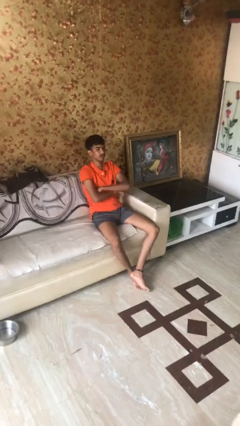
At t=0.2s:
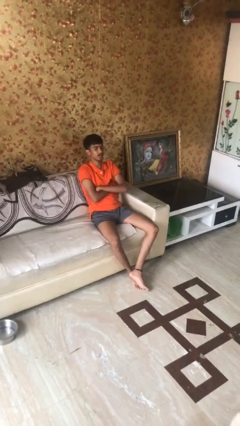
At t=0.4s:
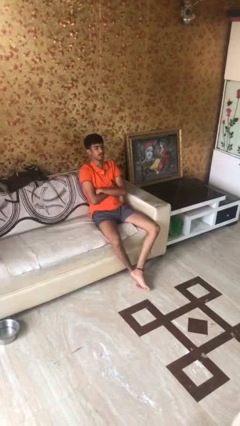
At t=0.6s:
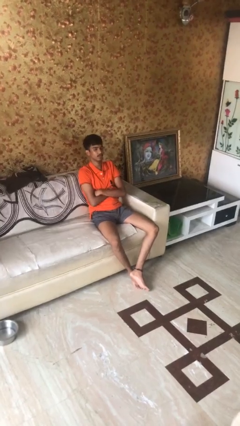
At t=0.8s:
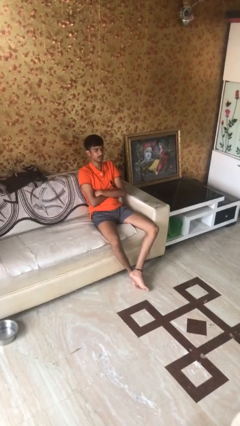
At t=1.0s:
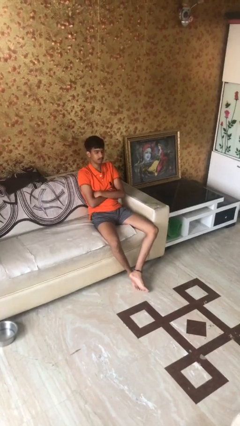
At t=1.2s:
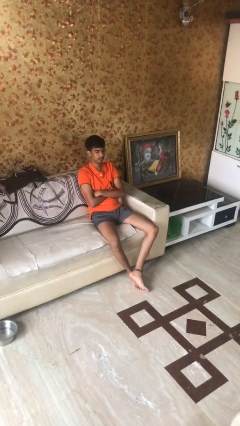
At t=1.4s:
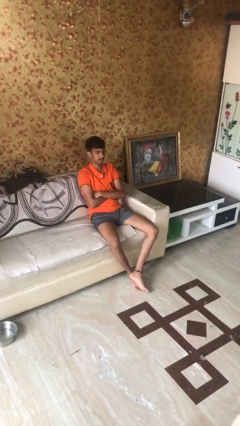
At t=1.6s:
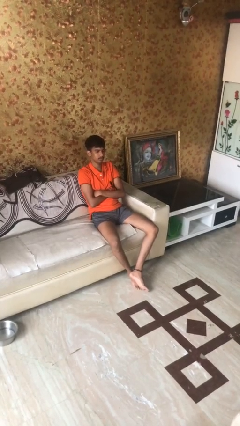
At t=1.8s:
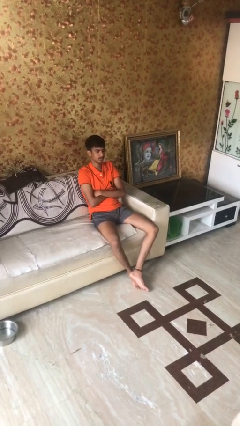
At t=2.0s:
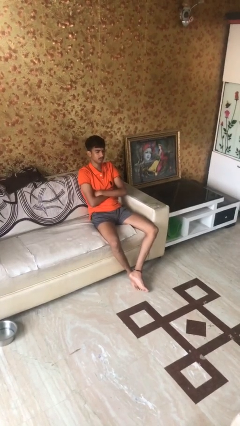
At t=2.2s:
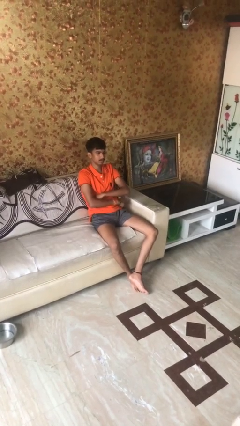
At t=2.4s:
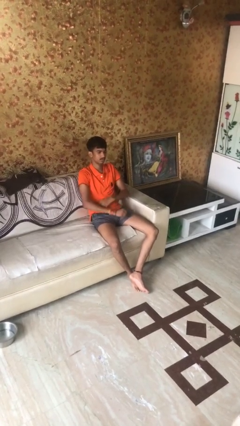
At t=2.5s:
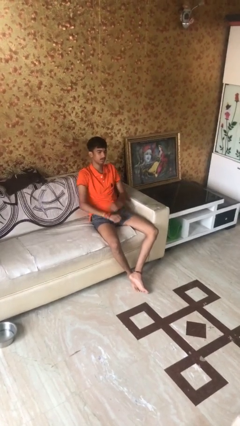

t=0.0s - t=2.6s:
person crosses arms

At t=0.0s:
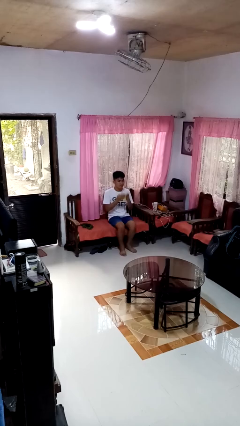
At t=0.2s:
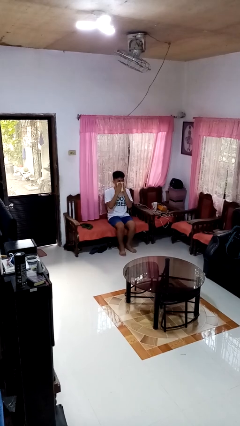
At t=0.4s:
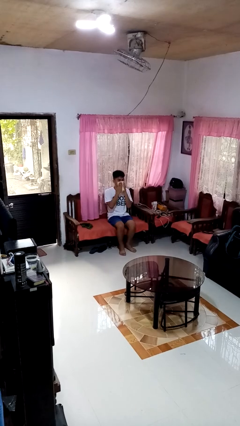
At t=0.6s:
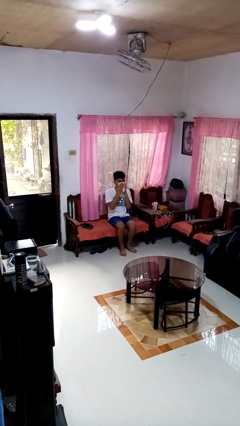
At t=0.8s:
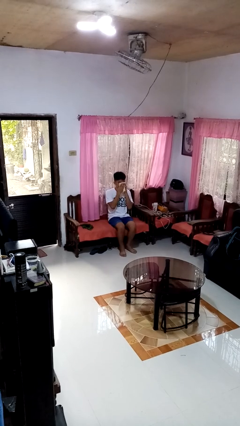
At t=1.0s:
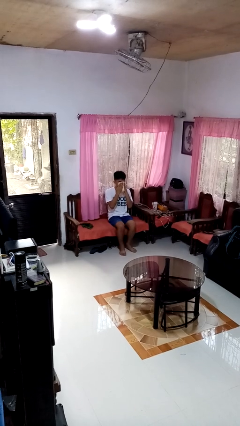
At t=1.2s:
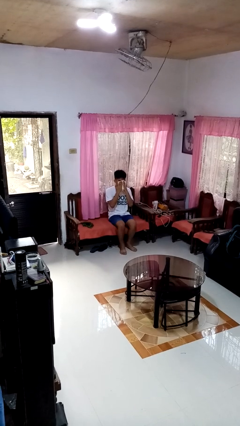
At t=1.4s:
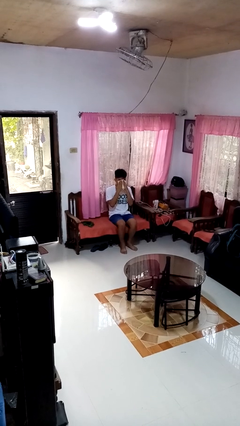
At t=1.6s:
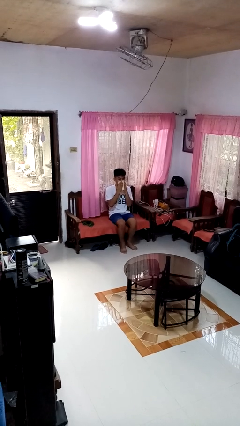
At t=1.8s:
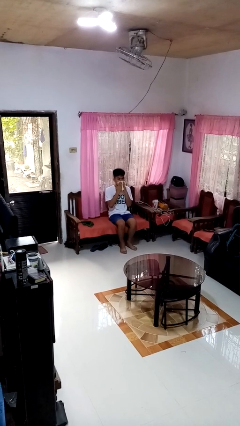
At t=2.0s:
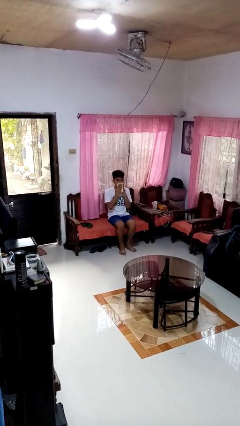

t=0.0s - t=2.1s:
person wipes mouth with napkin

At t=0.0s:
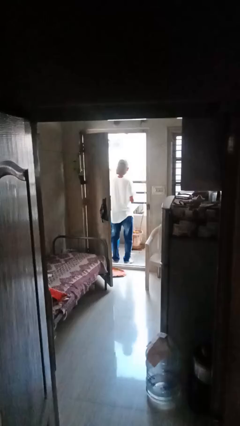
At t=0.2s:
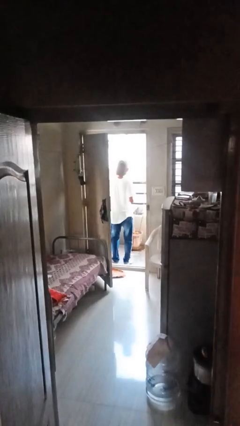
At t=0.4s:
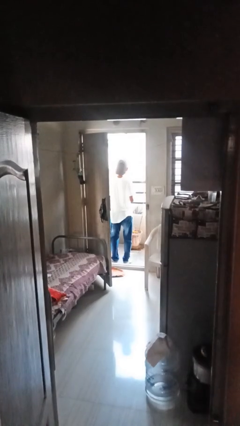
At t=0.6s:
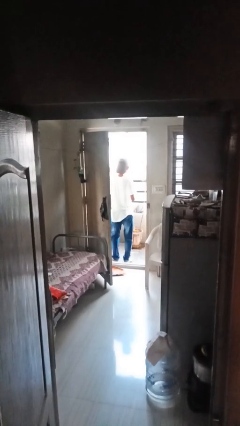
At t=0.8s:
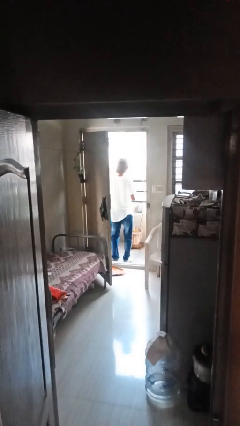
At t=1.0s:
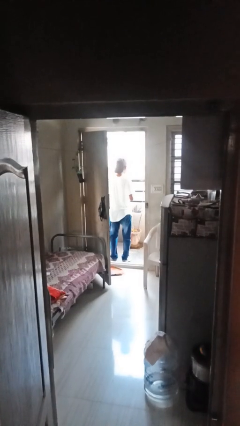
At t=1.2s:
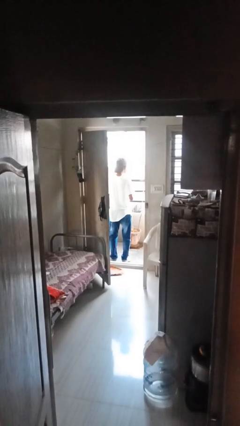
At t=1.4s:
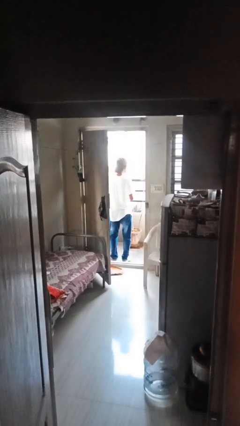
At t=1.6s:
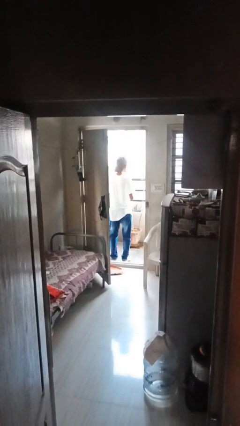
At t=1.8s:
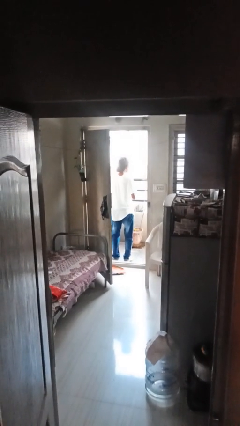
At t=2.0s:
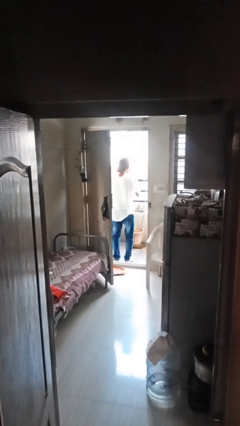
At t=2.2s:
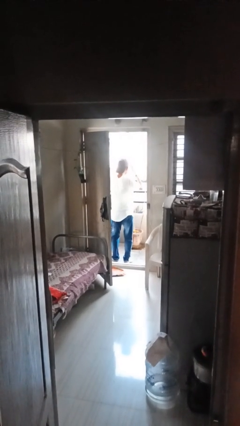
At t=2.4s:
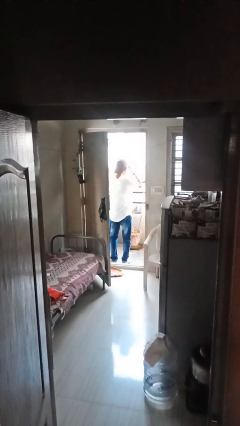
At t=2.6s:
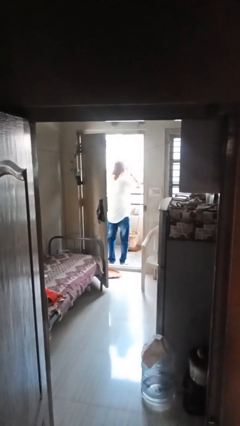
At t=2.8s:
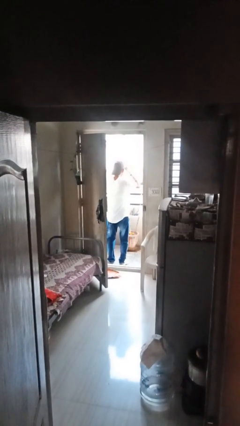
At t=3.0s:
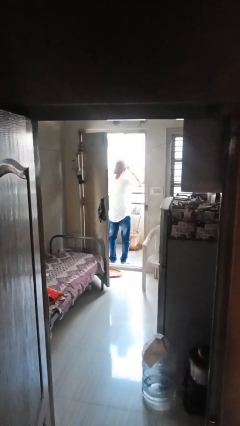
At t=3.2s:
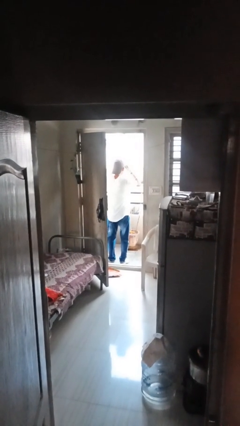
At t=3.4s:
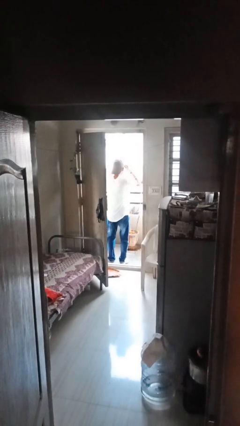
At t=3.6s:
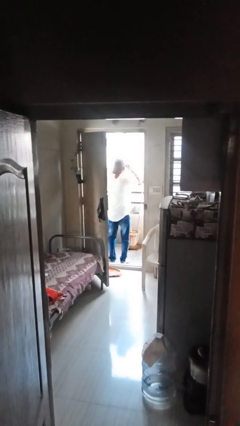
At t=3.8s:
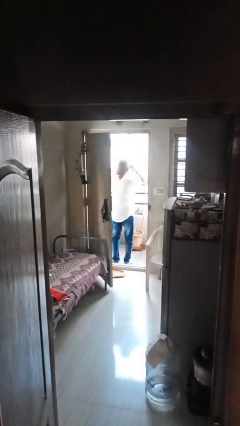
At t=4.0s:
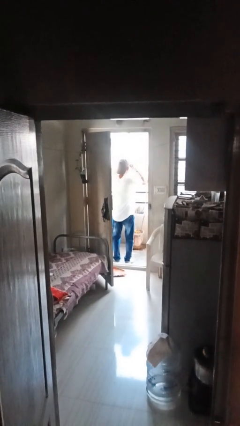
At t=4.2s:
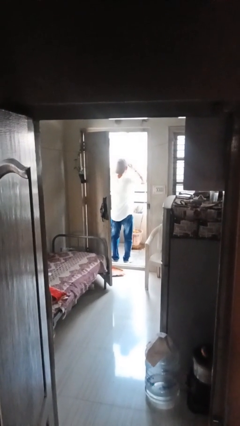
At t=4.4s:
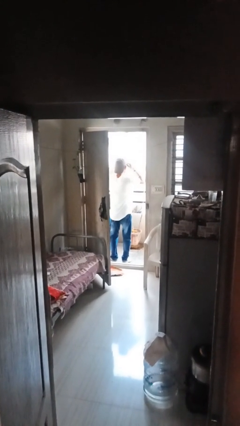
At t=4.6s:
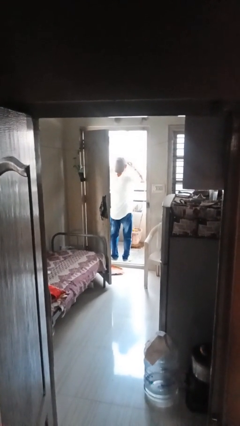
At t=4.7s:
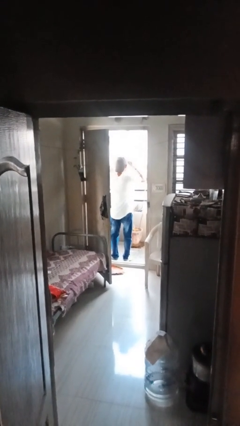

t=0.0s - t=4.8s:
person shades eyes

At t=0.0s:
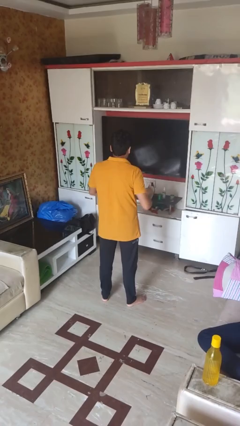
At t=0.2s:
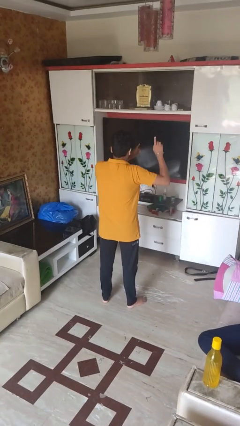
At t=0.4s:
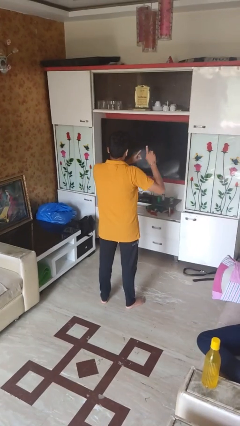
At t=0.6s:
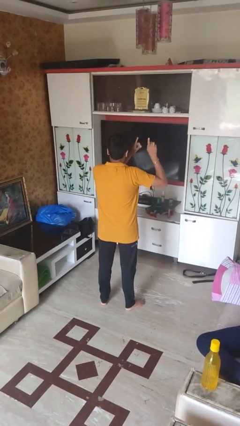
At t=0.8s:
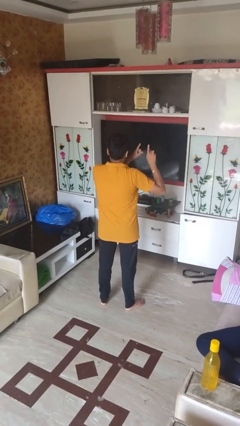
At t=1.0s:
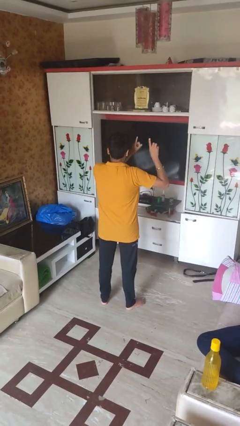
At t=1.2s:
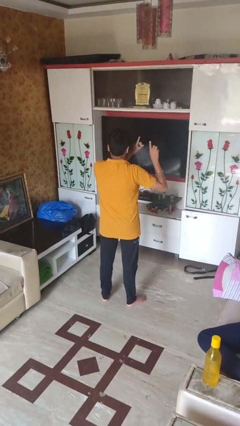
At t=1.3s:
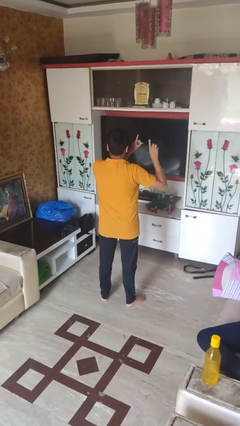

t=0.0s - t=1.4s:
person dances in place

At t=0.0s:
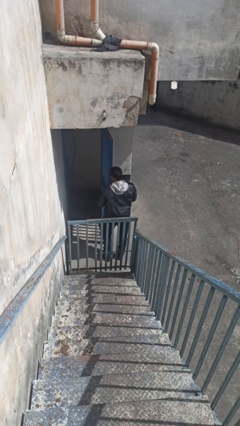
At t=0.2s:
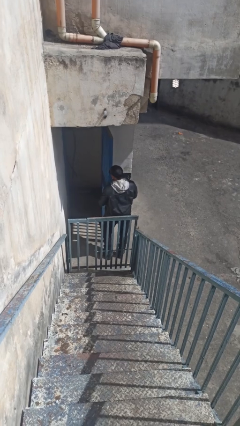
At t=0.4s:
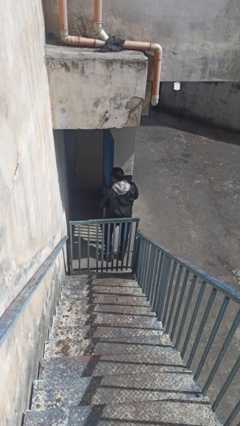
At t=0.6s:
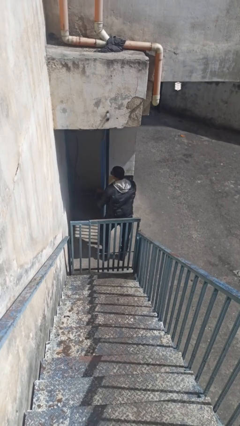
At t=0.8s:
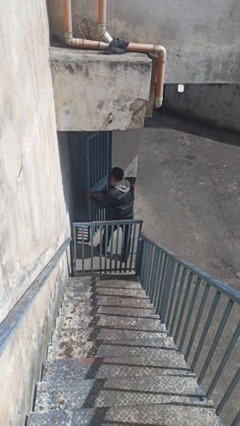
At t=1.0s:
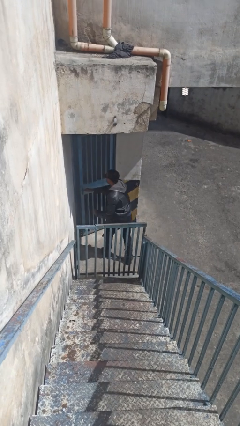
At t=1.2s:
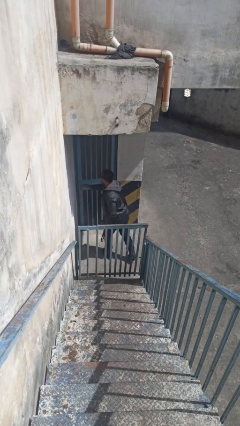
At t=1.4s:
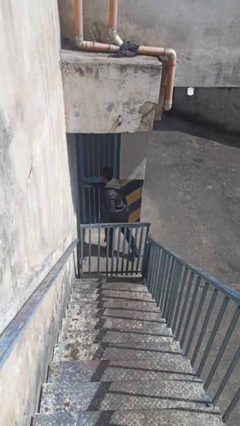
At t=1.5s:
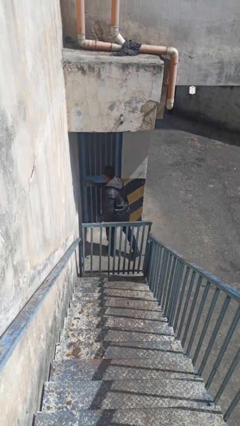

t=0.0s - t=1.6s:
person closes facility door

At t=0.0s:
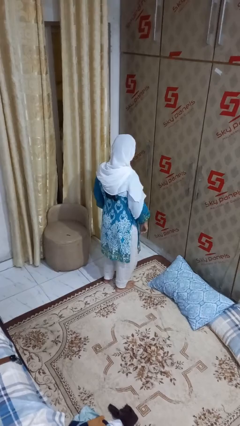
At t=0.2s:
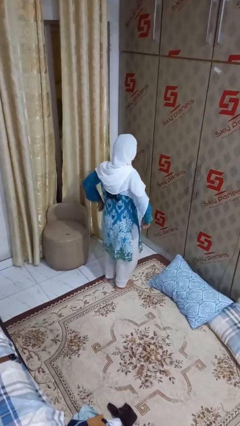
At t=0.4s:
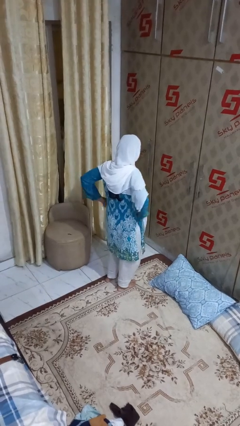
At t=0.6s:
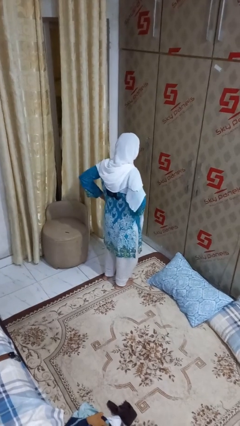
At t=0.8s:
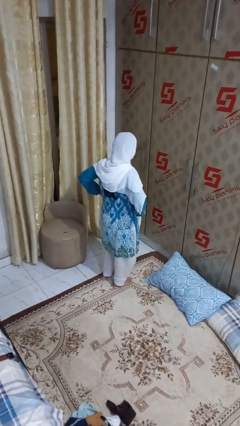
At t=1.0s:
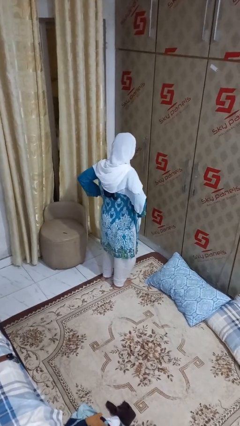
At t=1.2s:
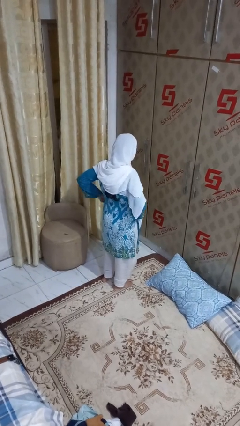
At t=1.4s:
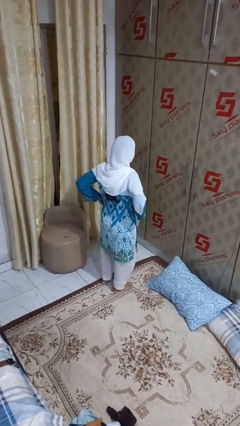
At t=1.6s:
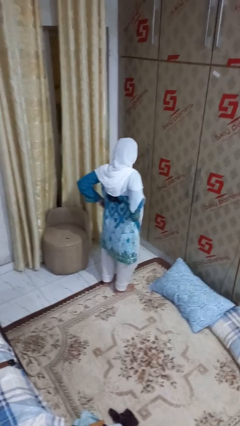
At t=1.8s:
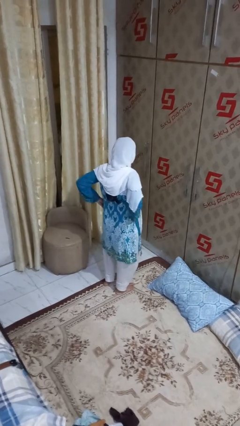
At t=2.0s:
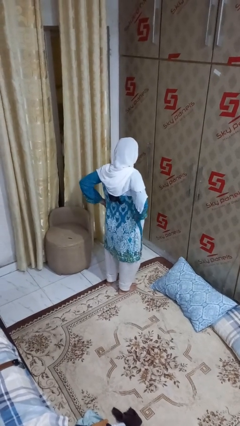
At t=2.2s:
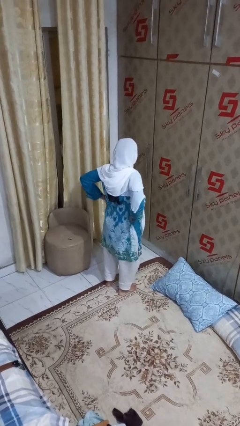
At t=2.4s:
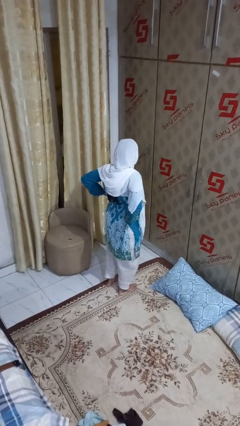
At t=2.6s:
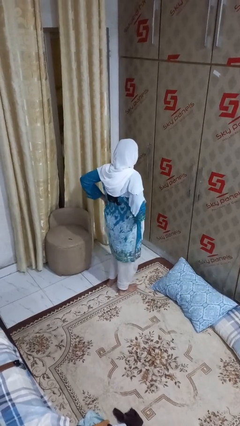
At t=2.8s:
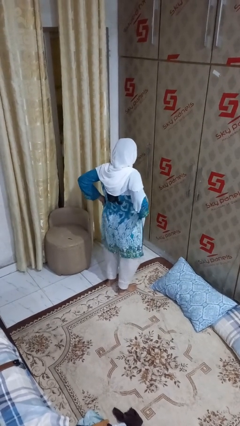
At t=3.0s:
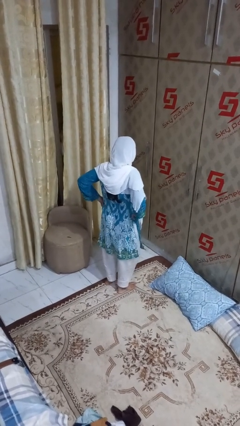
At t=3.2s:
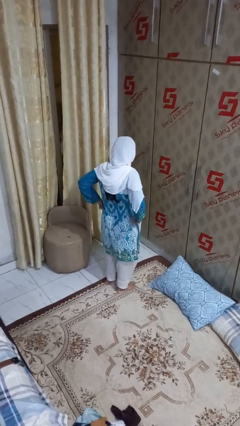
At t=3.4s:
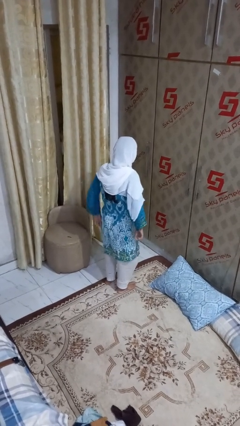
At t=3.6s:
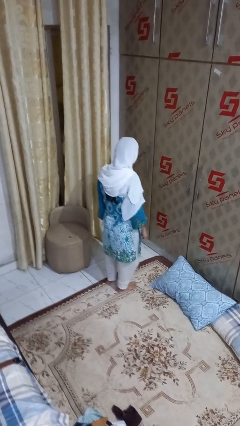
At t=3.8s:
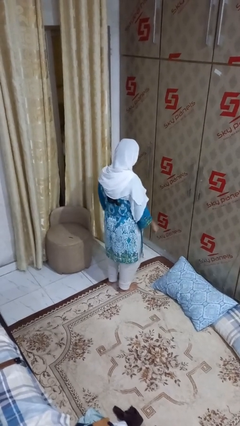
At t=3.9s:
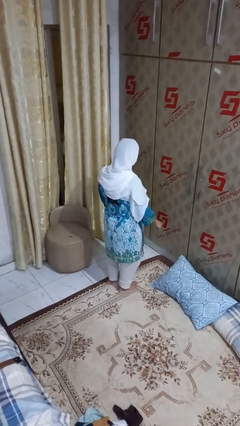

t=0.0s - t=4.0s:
person hikes up pants

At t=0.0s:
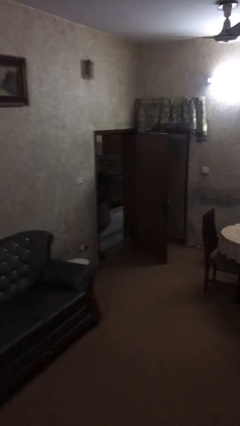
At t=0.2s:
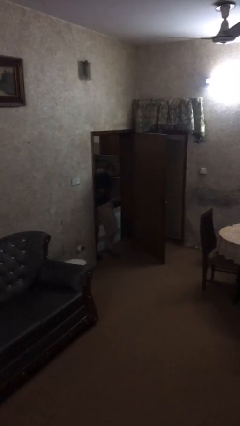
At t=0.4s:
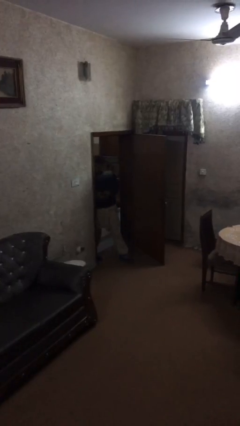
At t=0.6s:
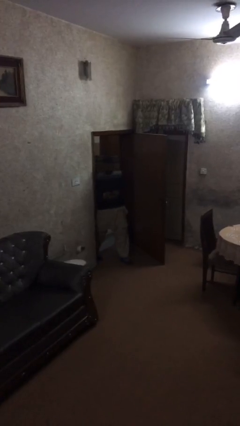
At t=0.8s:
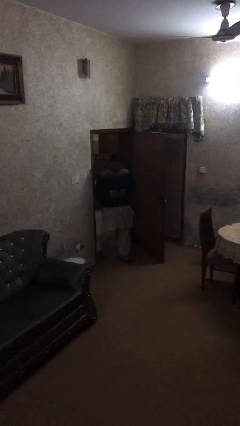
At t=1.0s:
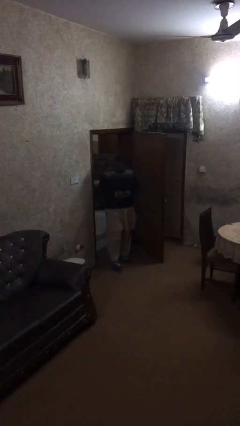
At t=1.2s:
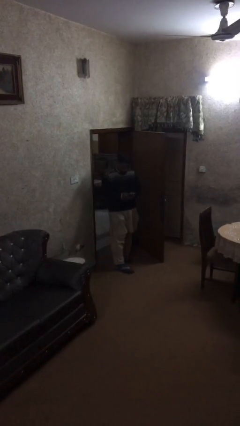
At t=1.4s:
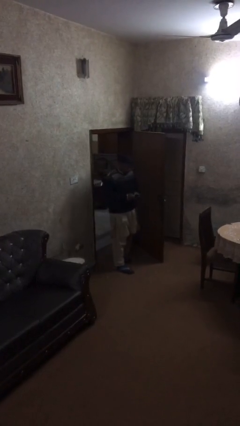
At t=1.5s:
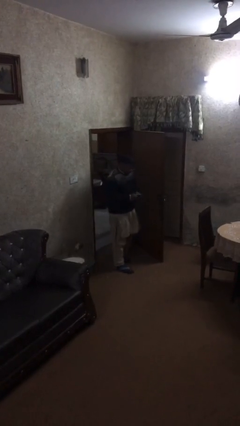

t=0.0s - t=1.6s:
person enters scene through structure
